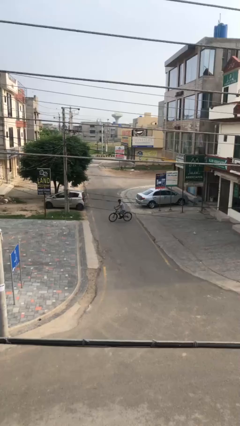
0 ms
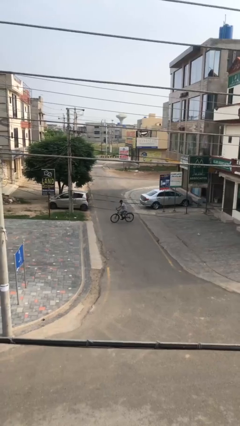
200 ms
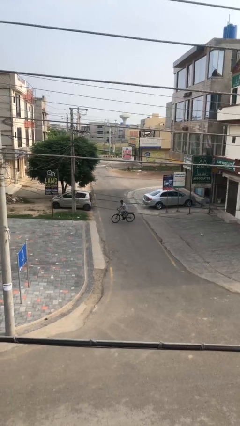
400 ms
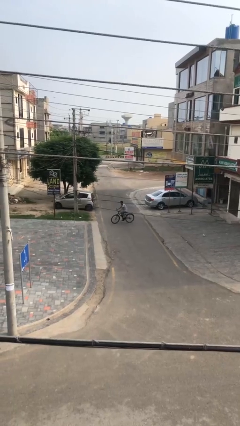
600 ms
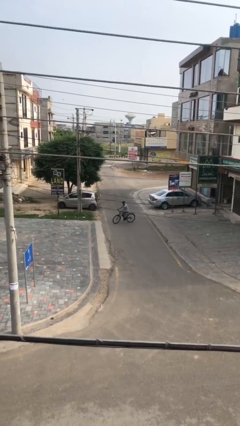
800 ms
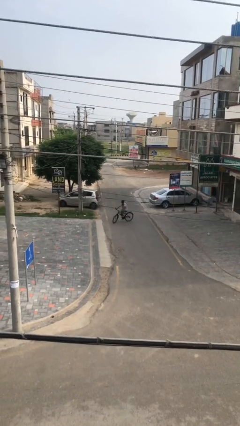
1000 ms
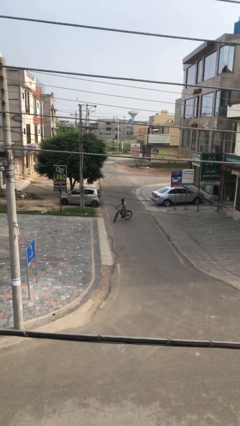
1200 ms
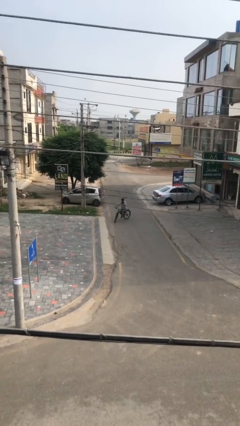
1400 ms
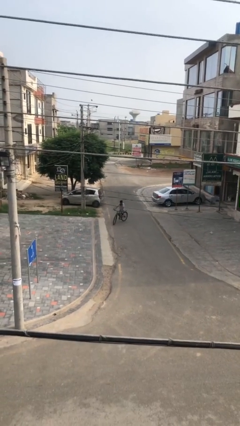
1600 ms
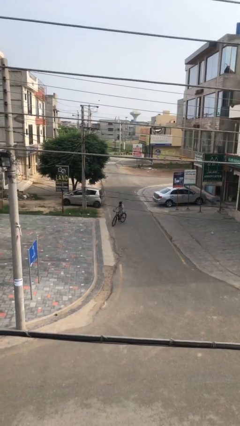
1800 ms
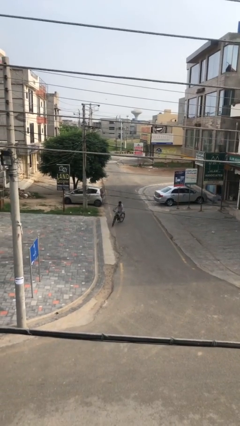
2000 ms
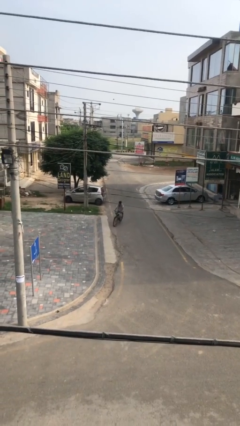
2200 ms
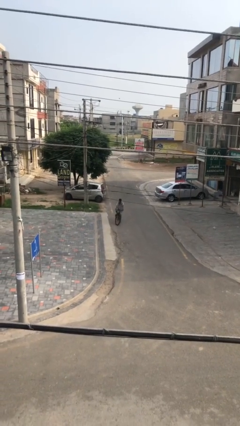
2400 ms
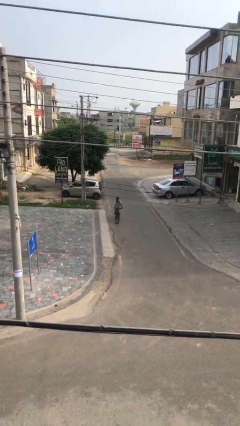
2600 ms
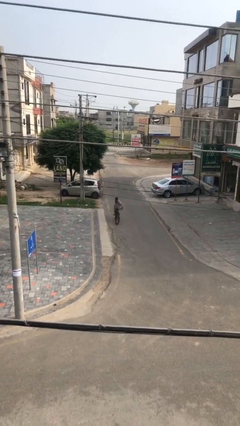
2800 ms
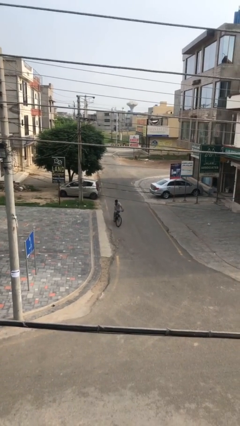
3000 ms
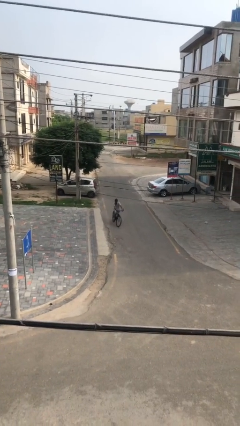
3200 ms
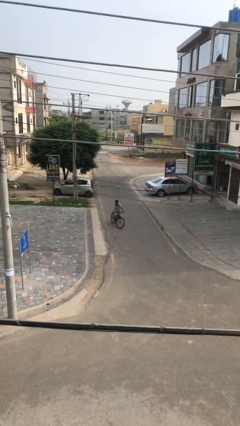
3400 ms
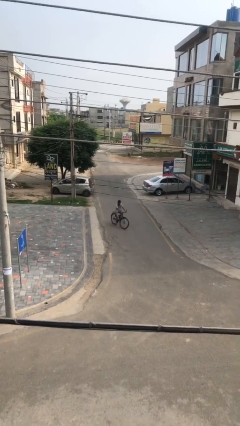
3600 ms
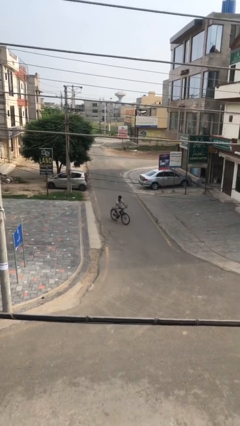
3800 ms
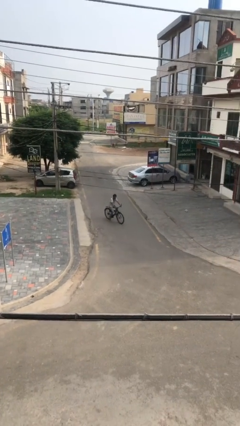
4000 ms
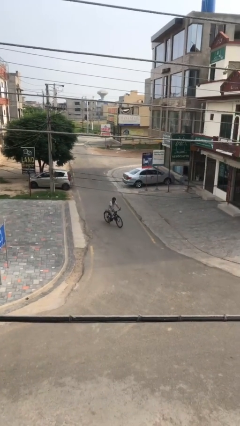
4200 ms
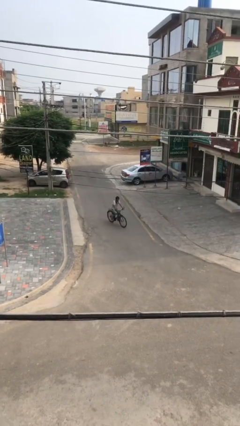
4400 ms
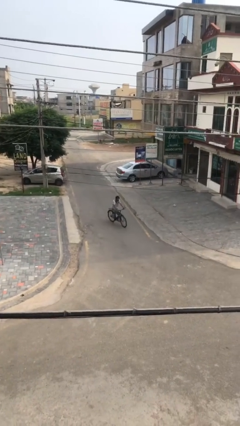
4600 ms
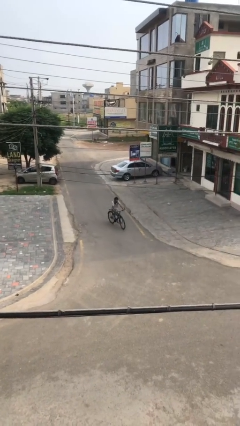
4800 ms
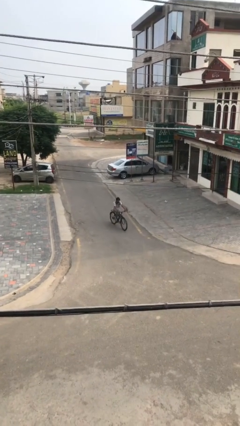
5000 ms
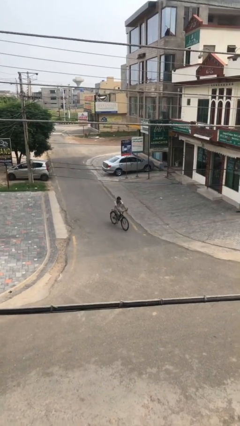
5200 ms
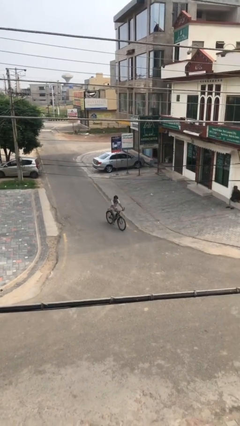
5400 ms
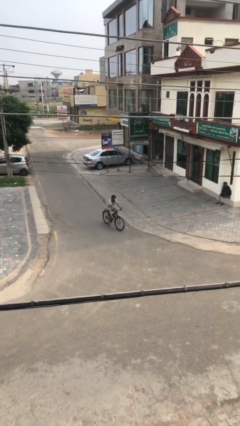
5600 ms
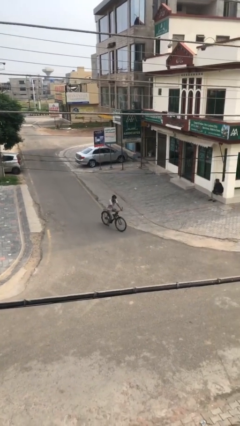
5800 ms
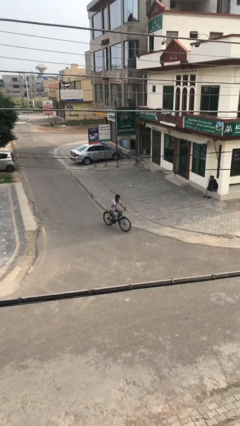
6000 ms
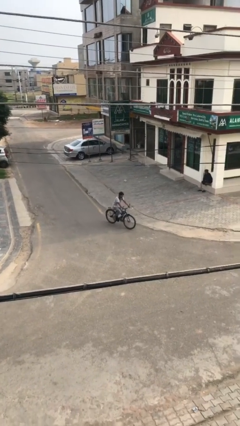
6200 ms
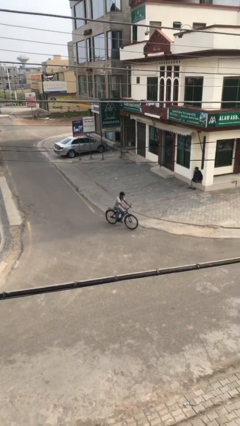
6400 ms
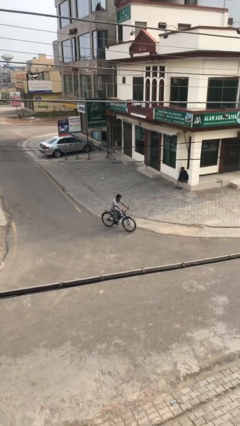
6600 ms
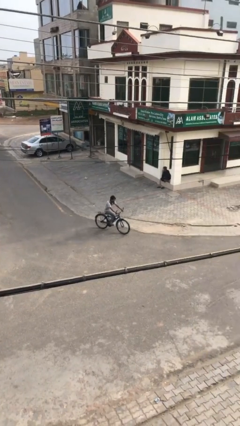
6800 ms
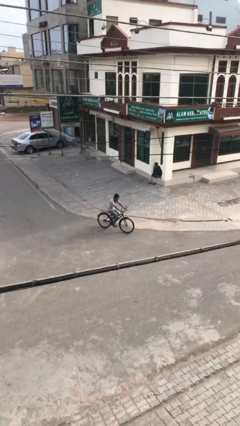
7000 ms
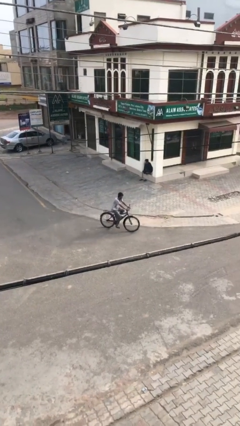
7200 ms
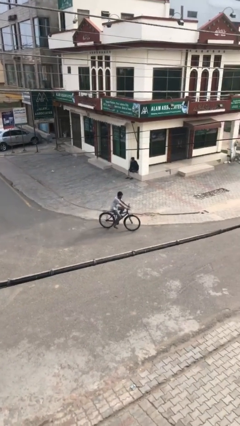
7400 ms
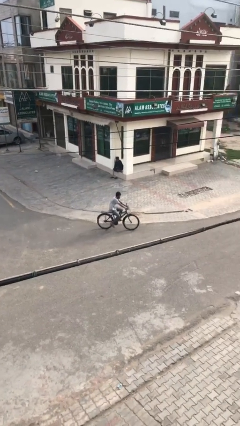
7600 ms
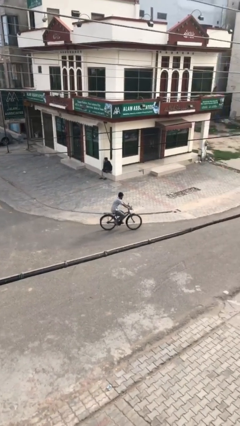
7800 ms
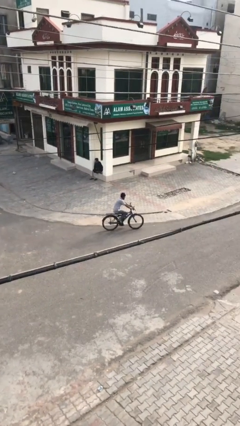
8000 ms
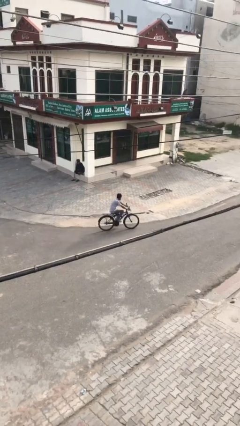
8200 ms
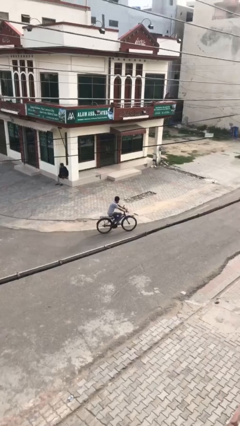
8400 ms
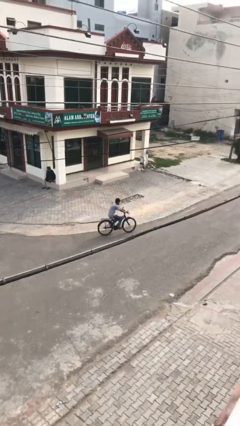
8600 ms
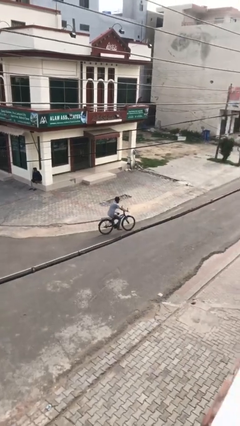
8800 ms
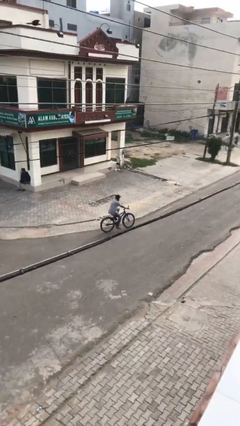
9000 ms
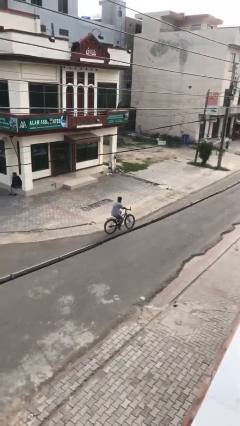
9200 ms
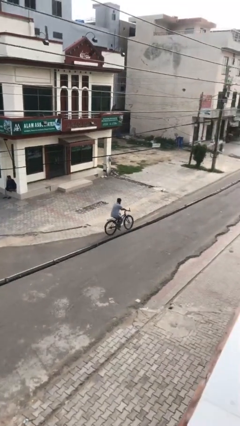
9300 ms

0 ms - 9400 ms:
person rides bicycle

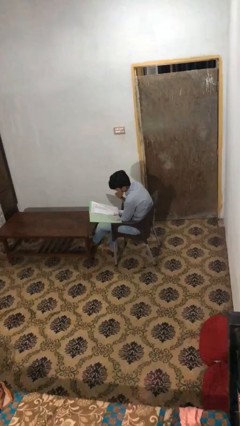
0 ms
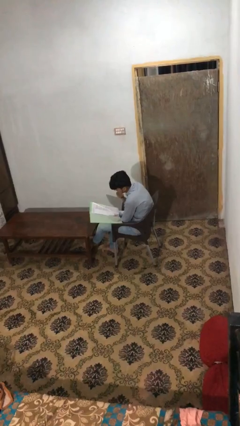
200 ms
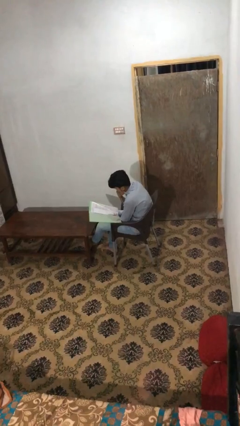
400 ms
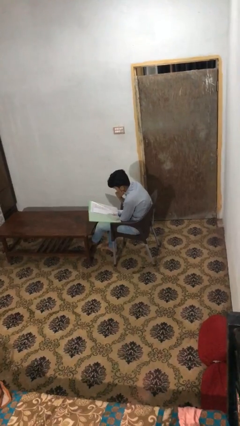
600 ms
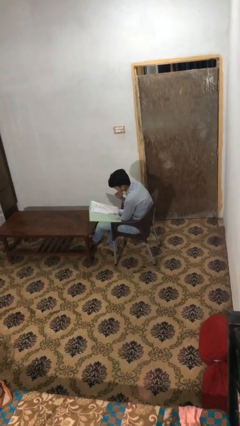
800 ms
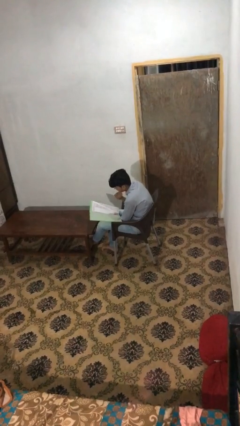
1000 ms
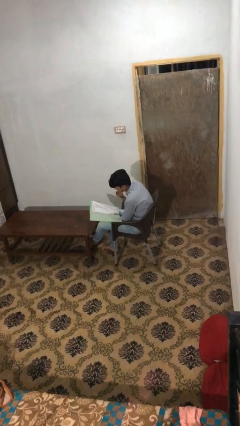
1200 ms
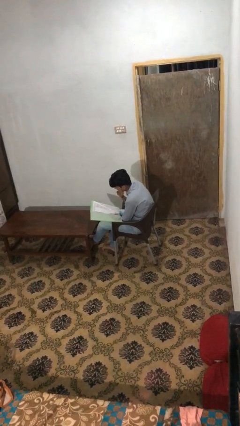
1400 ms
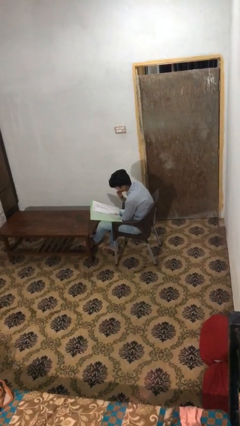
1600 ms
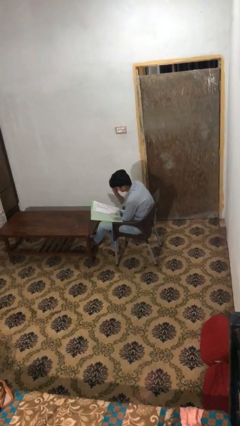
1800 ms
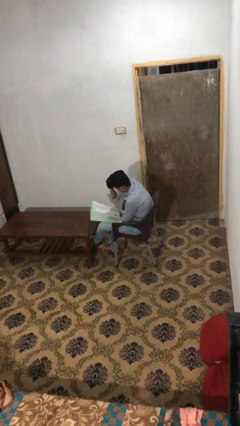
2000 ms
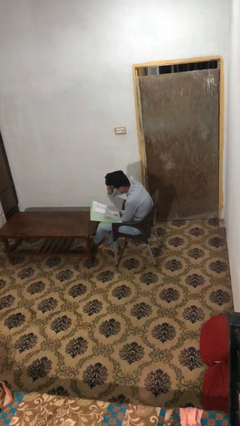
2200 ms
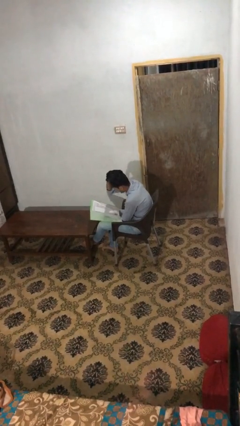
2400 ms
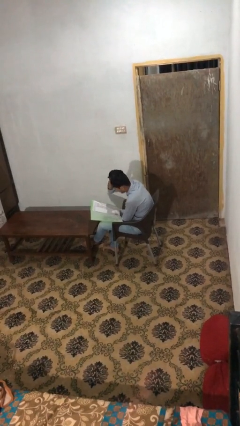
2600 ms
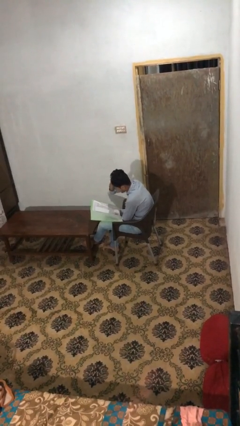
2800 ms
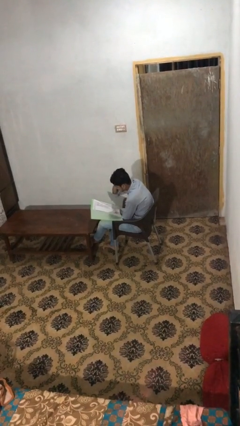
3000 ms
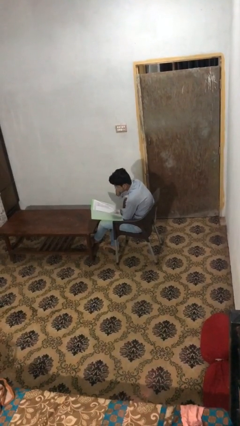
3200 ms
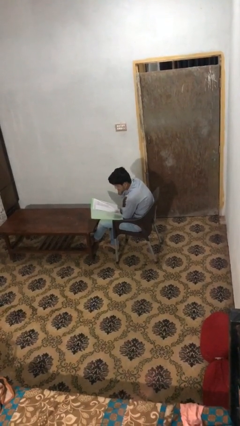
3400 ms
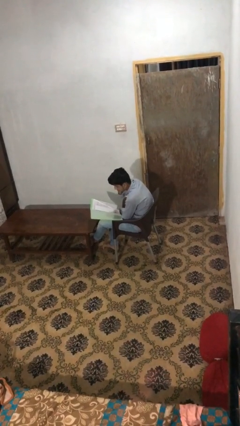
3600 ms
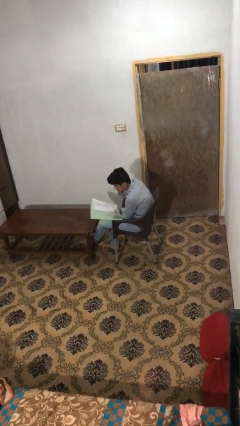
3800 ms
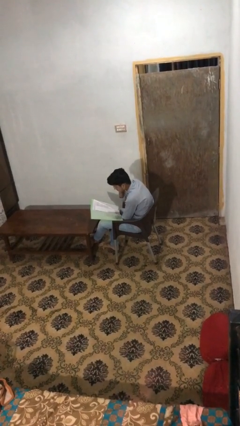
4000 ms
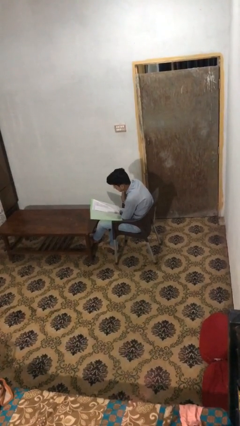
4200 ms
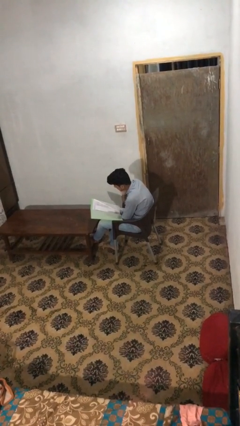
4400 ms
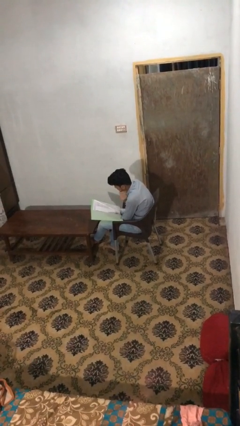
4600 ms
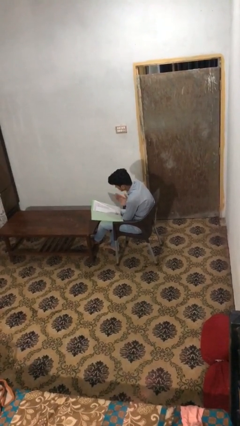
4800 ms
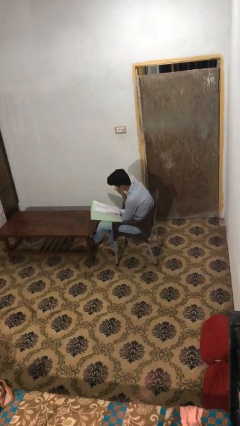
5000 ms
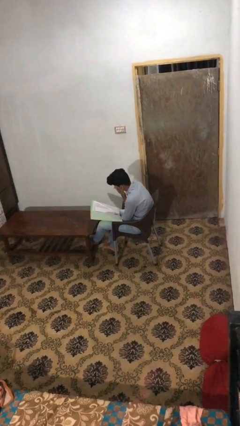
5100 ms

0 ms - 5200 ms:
person reads document

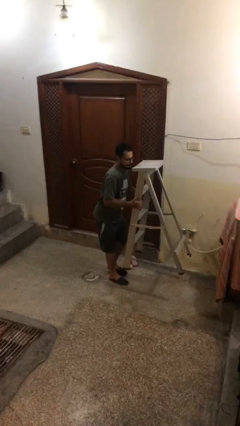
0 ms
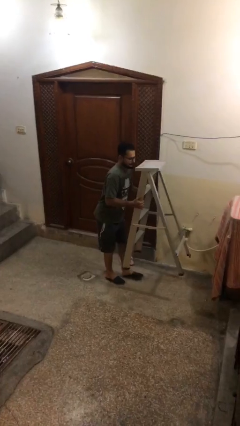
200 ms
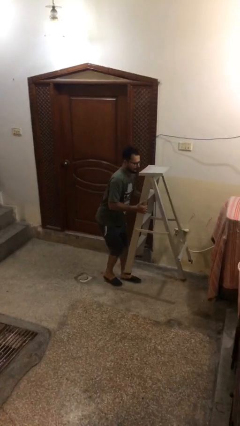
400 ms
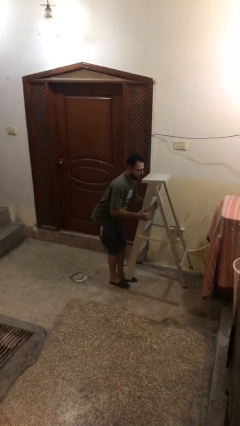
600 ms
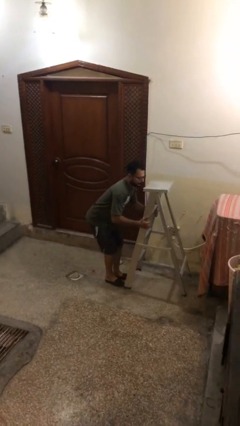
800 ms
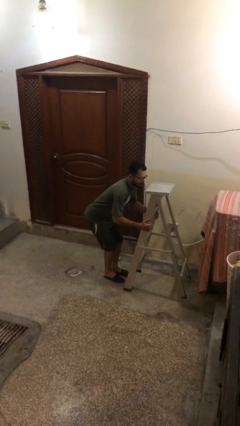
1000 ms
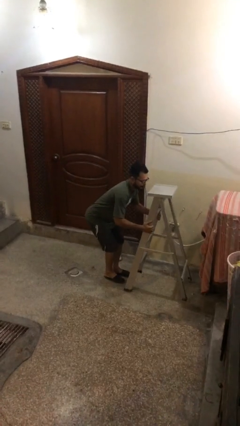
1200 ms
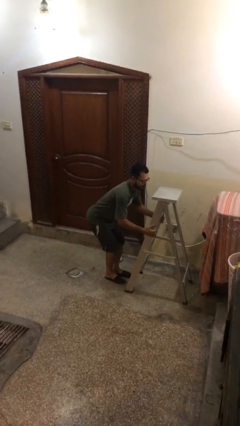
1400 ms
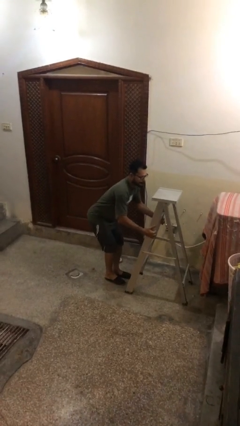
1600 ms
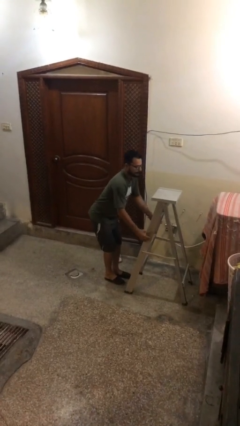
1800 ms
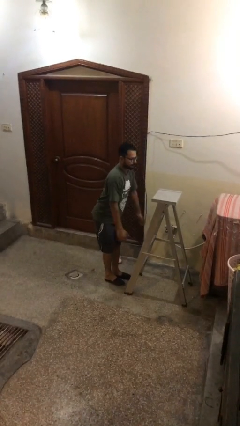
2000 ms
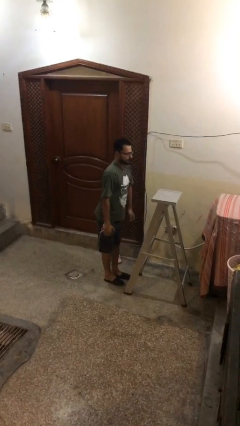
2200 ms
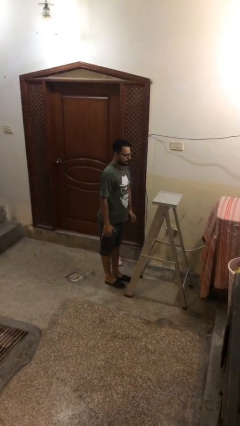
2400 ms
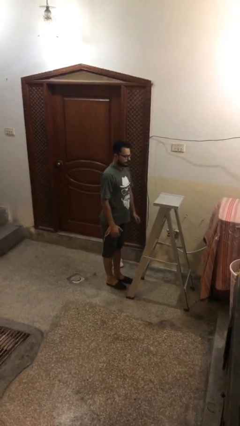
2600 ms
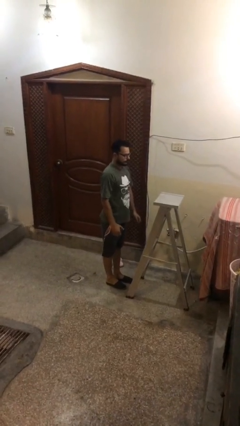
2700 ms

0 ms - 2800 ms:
person puts down object on floor

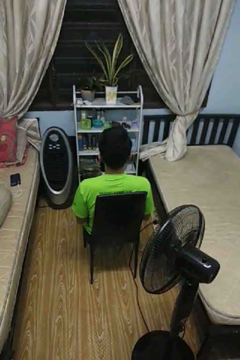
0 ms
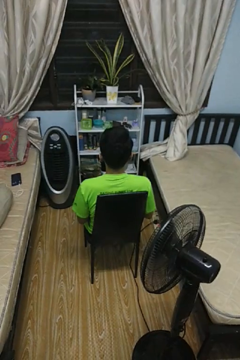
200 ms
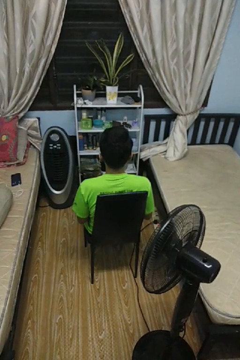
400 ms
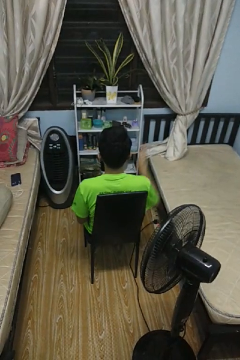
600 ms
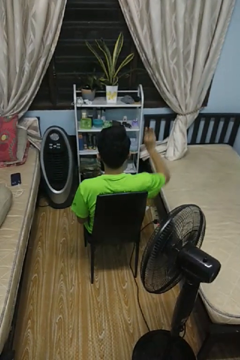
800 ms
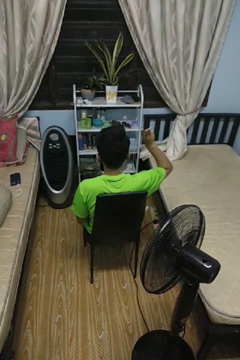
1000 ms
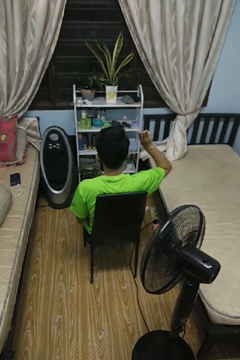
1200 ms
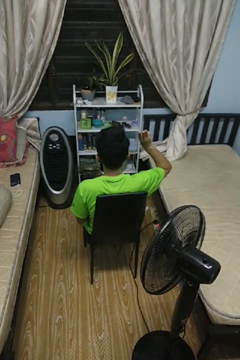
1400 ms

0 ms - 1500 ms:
person gestures number three
